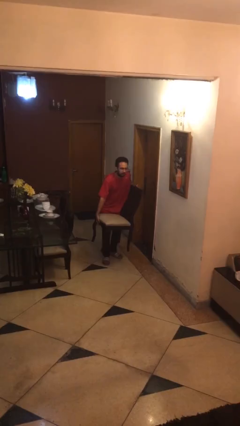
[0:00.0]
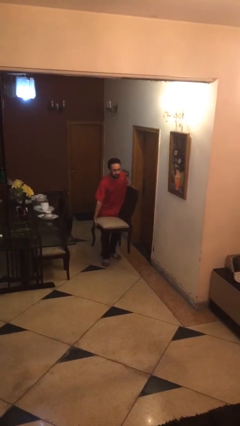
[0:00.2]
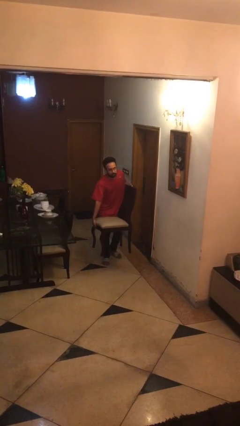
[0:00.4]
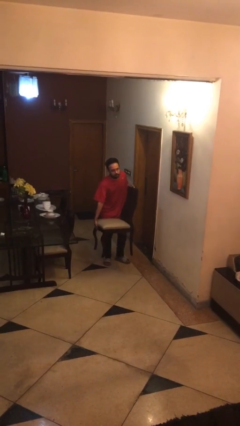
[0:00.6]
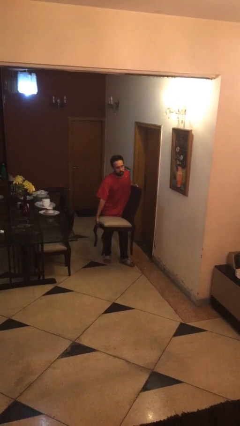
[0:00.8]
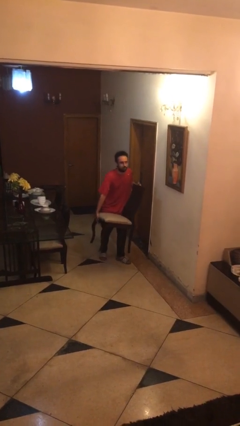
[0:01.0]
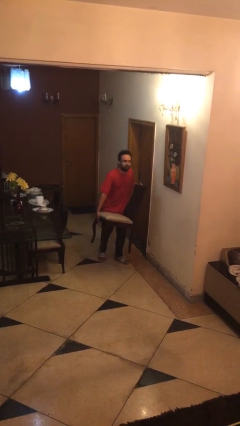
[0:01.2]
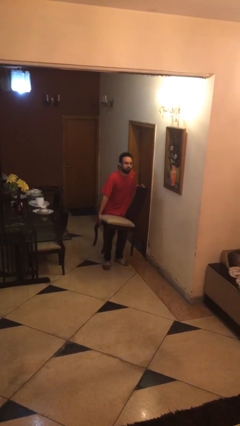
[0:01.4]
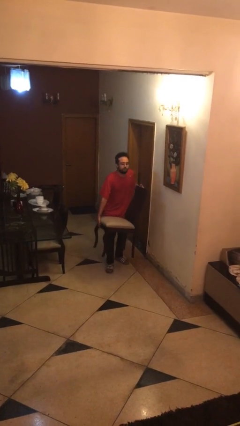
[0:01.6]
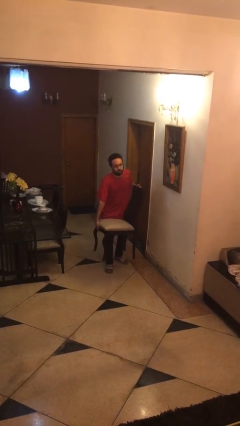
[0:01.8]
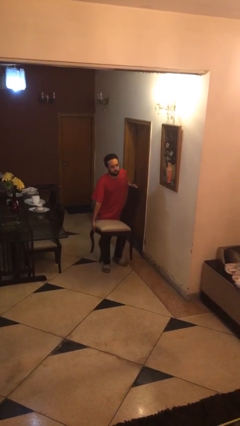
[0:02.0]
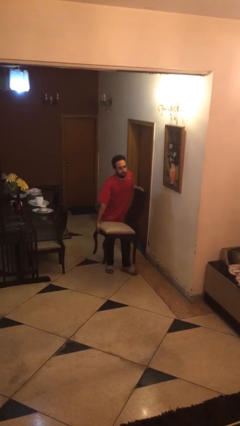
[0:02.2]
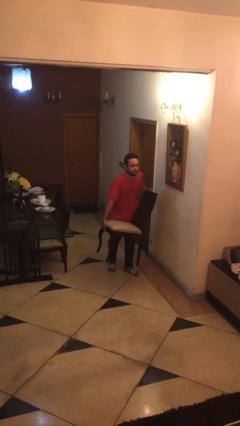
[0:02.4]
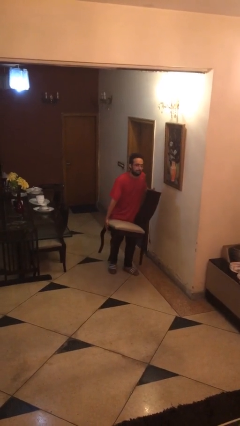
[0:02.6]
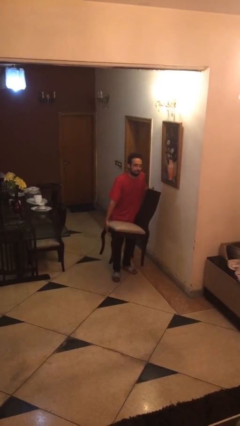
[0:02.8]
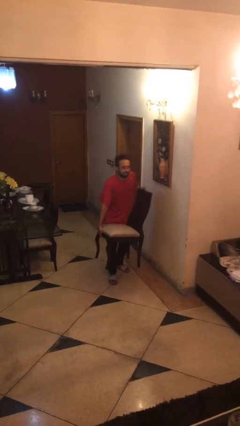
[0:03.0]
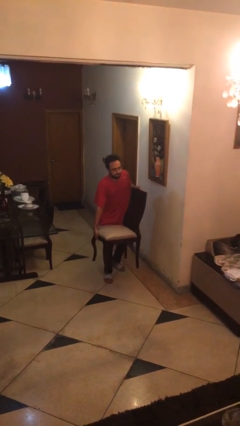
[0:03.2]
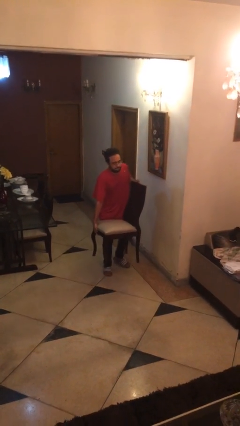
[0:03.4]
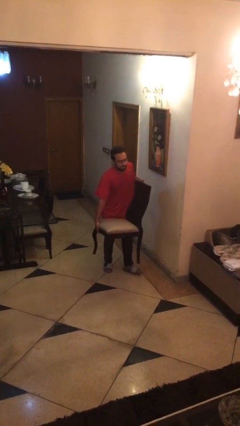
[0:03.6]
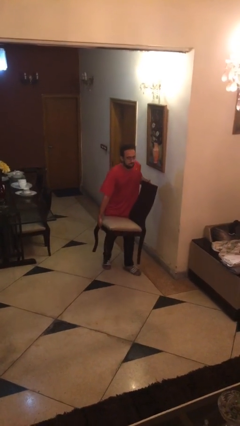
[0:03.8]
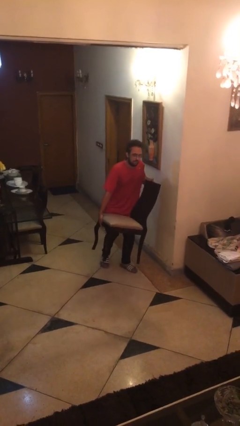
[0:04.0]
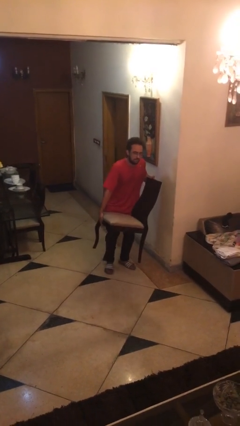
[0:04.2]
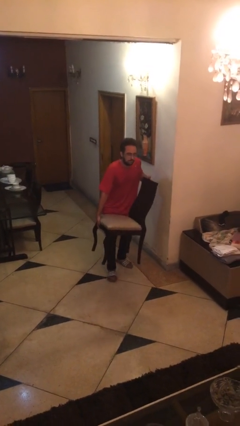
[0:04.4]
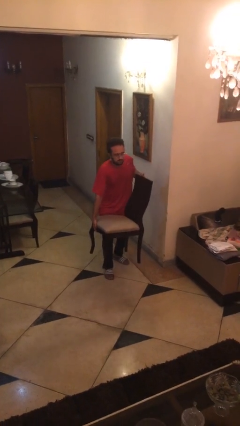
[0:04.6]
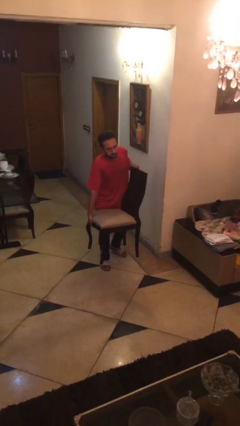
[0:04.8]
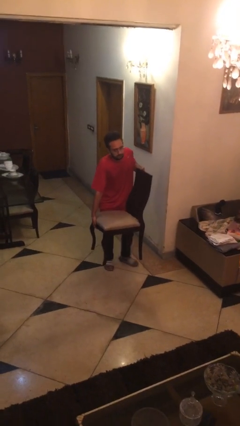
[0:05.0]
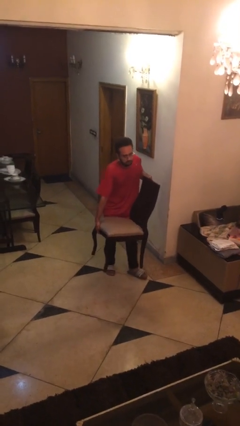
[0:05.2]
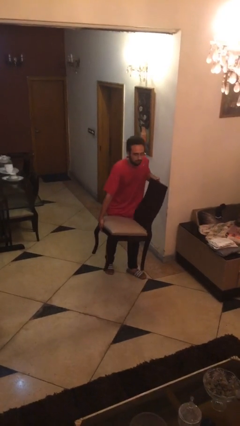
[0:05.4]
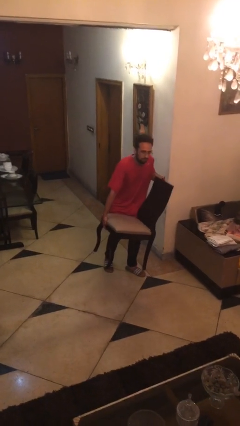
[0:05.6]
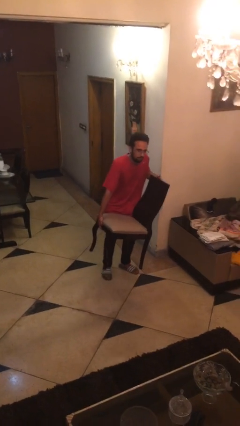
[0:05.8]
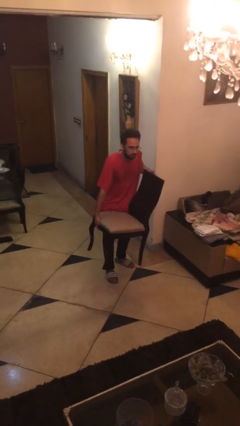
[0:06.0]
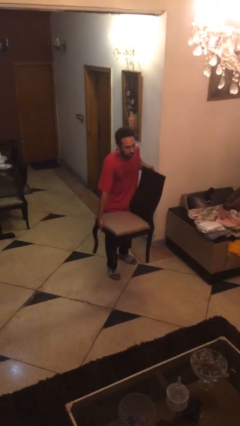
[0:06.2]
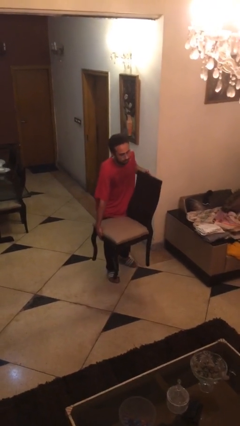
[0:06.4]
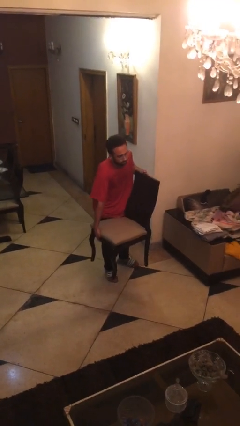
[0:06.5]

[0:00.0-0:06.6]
person carries heavy object

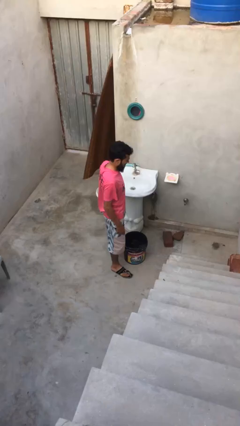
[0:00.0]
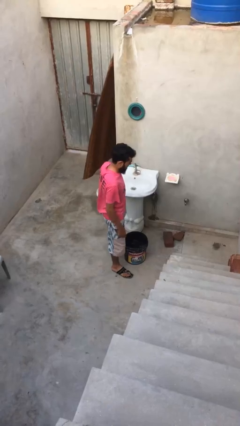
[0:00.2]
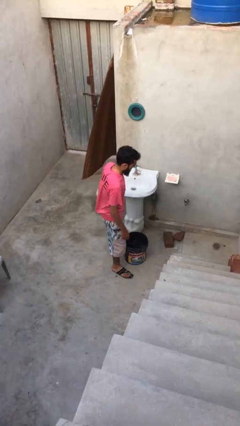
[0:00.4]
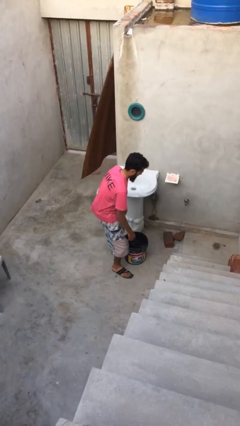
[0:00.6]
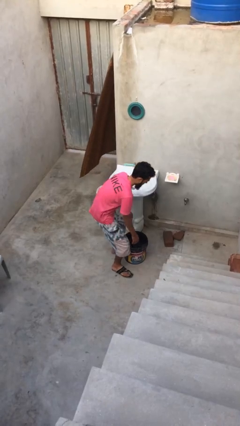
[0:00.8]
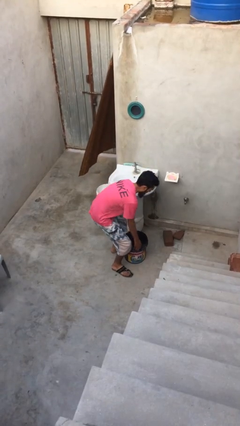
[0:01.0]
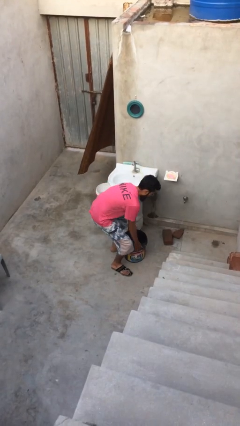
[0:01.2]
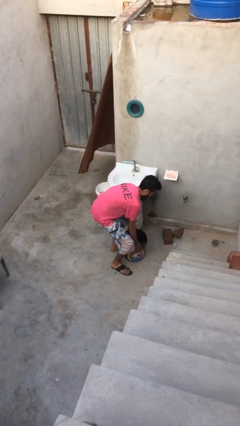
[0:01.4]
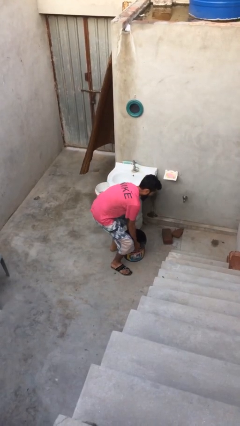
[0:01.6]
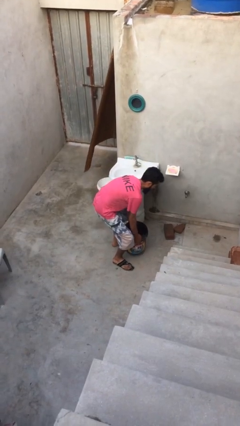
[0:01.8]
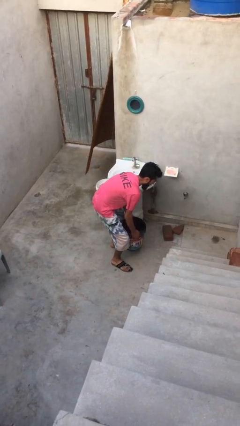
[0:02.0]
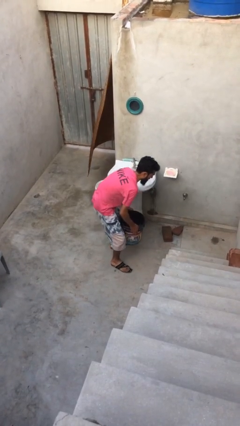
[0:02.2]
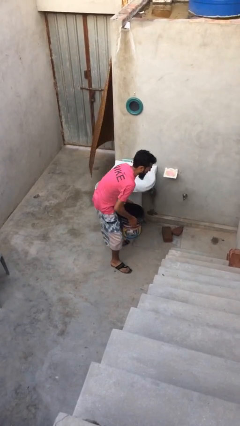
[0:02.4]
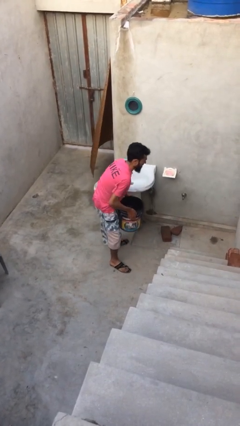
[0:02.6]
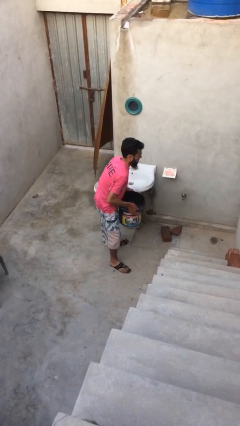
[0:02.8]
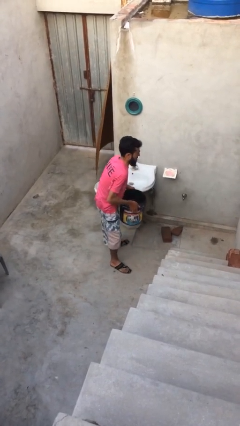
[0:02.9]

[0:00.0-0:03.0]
person picks up object from floor

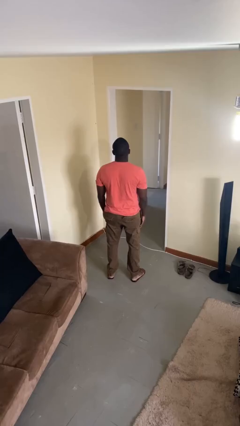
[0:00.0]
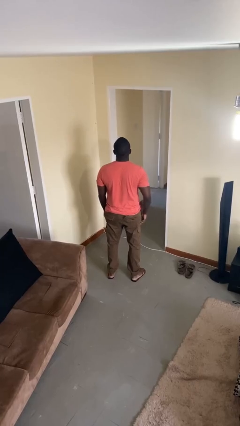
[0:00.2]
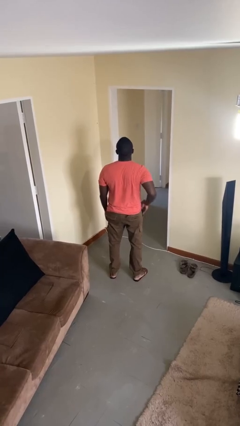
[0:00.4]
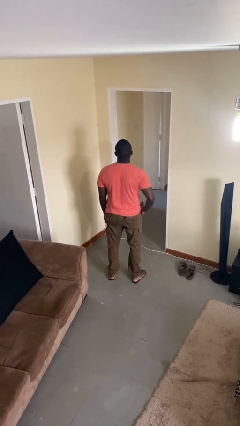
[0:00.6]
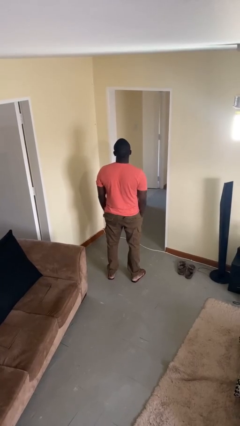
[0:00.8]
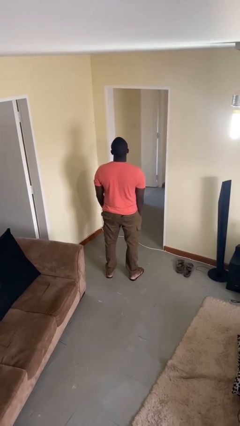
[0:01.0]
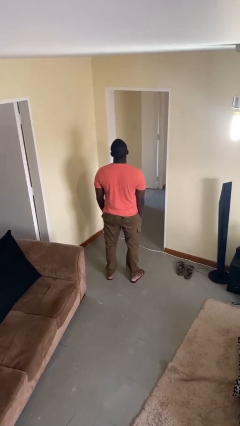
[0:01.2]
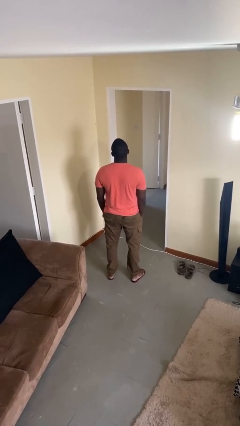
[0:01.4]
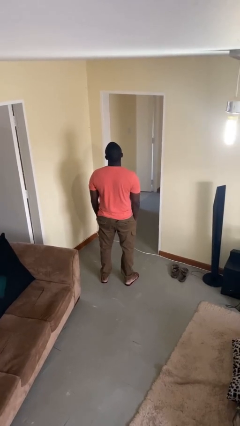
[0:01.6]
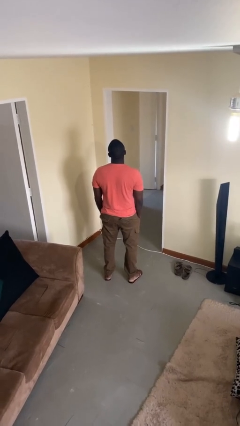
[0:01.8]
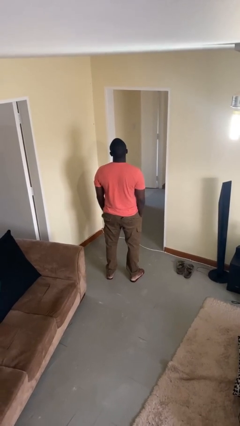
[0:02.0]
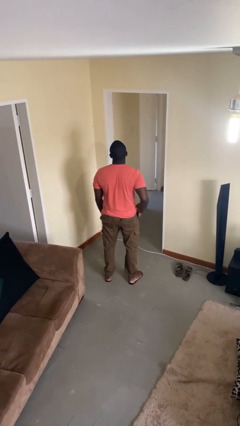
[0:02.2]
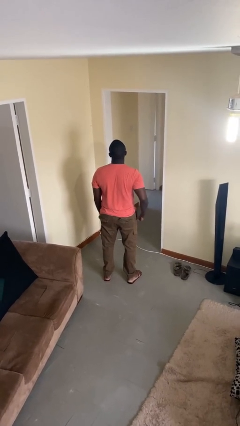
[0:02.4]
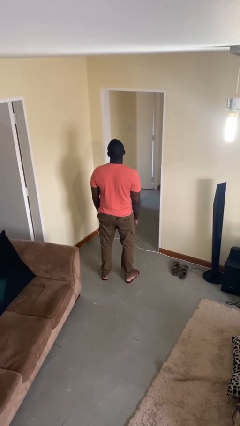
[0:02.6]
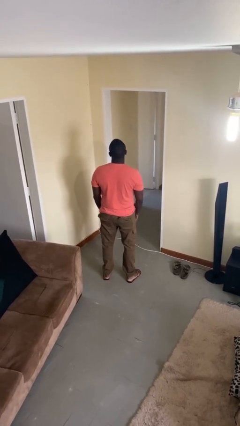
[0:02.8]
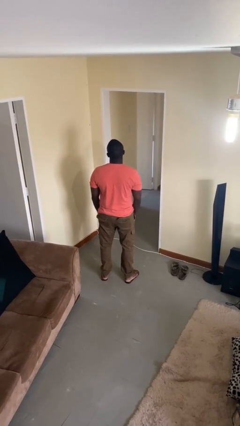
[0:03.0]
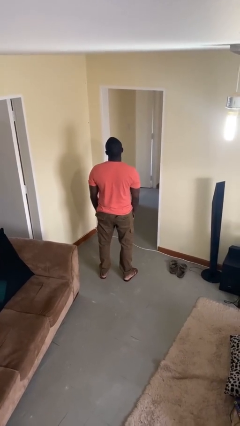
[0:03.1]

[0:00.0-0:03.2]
person puts hands in back pockets

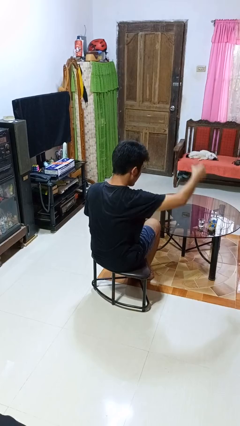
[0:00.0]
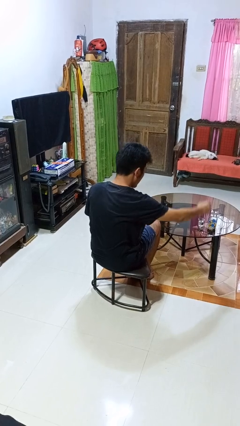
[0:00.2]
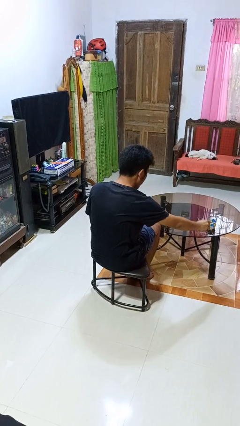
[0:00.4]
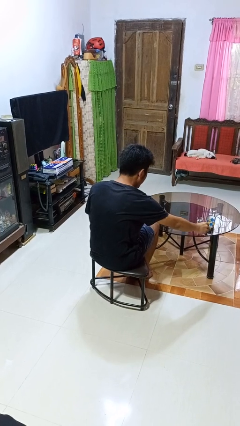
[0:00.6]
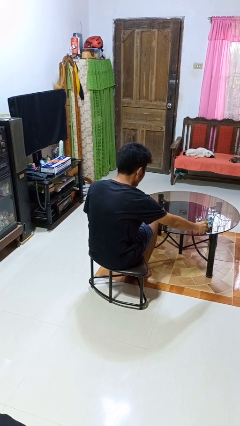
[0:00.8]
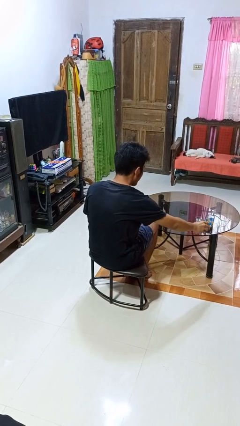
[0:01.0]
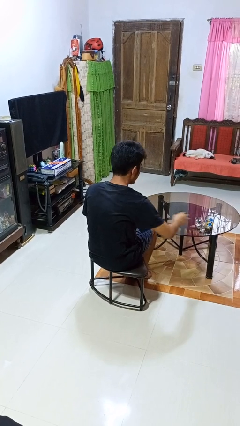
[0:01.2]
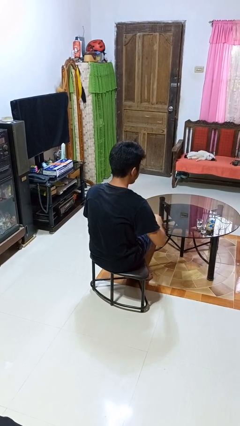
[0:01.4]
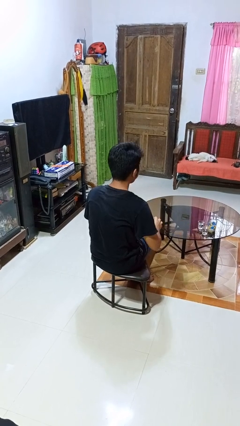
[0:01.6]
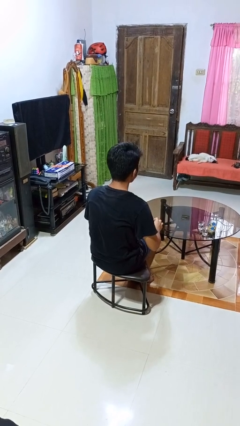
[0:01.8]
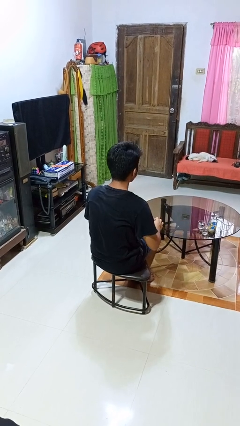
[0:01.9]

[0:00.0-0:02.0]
person puts down object on table

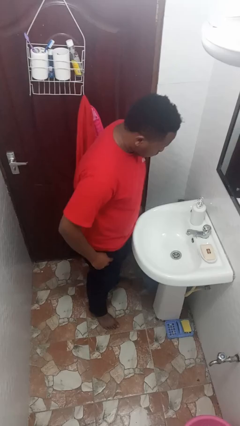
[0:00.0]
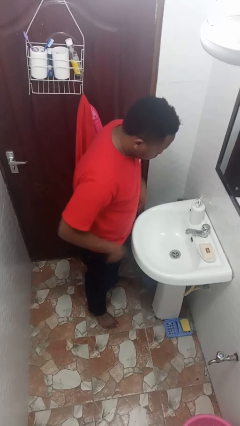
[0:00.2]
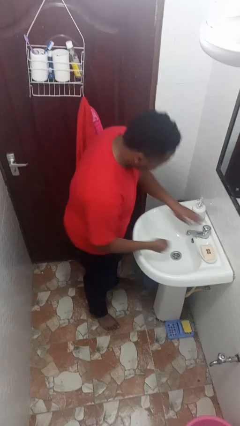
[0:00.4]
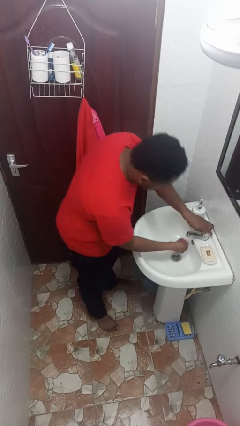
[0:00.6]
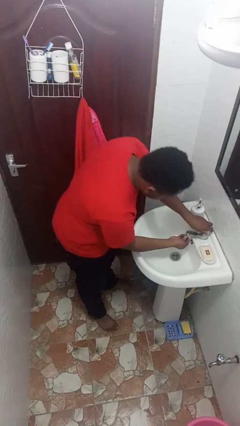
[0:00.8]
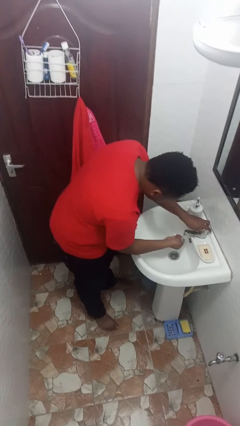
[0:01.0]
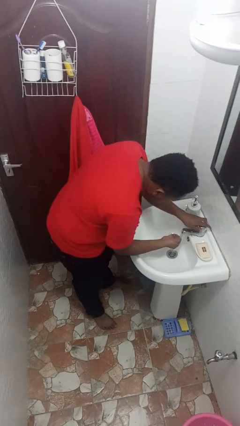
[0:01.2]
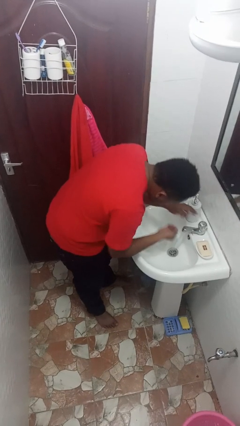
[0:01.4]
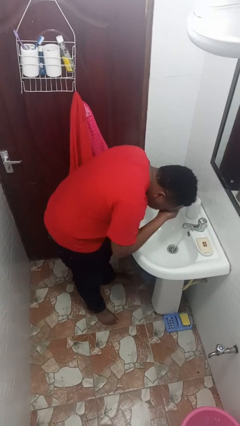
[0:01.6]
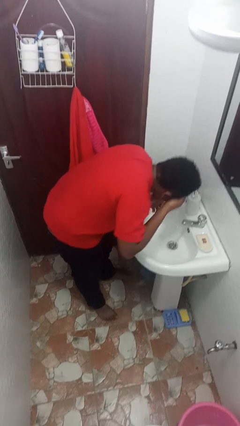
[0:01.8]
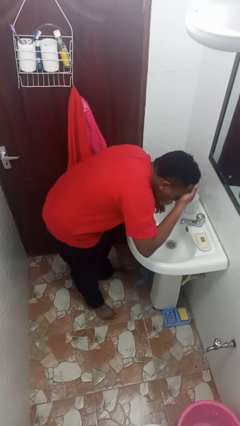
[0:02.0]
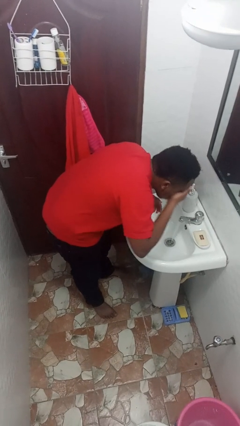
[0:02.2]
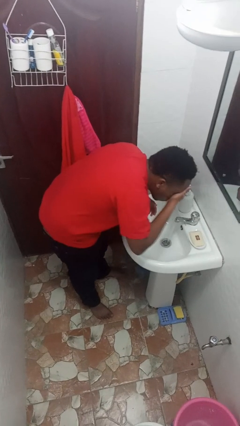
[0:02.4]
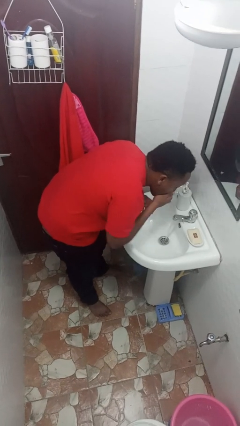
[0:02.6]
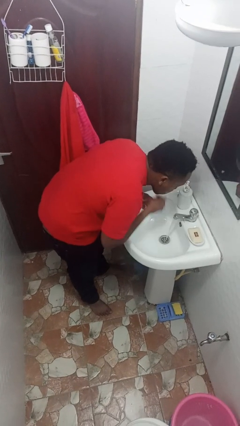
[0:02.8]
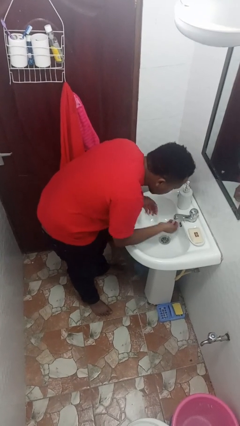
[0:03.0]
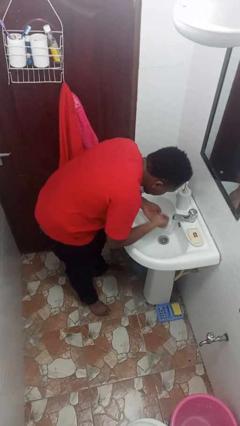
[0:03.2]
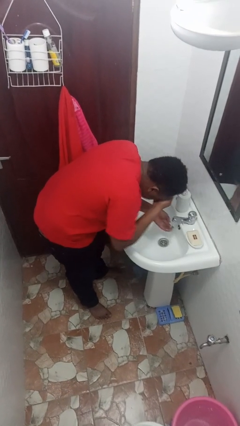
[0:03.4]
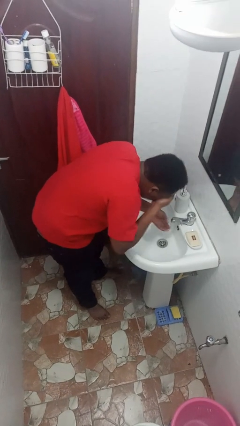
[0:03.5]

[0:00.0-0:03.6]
person washes face
